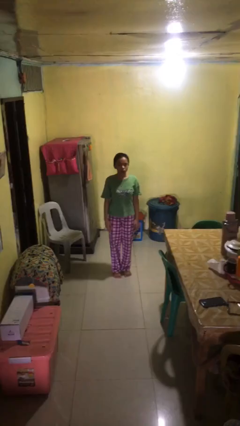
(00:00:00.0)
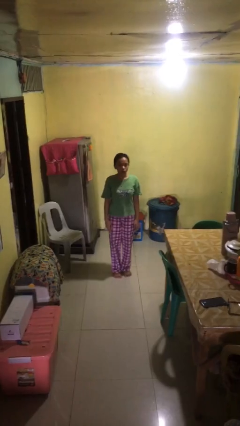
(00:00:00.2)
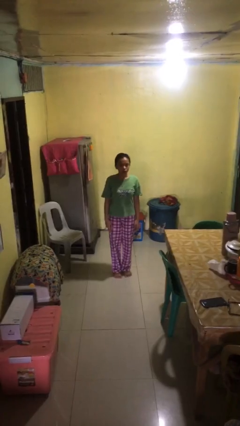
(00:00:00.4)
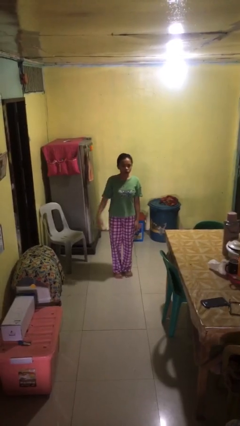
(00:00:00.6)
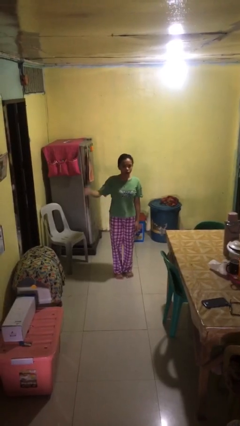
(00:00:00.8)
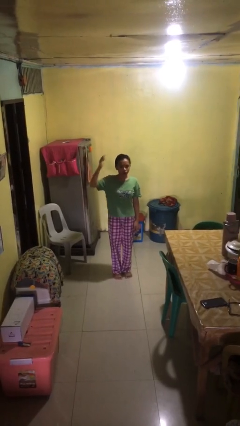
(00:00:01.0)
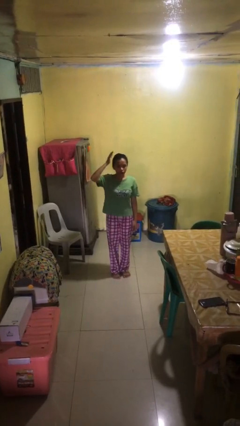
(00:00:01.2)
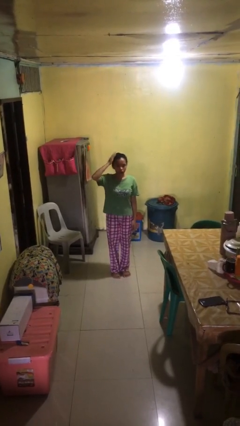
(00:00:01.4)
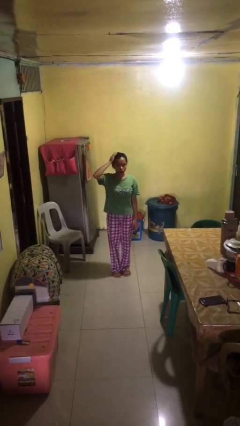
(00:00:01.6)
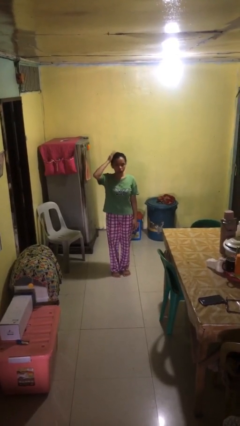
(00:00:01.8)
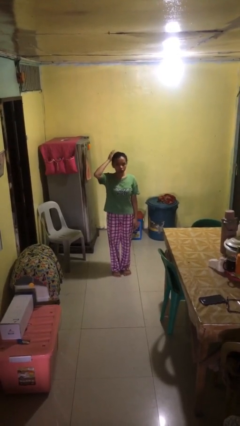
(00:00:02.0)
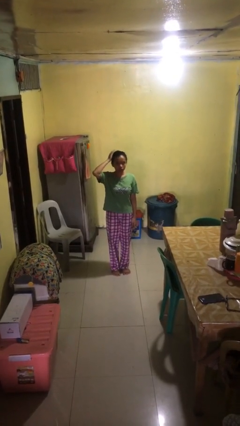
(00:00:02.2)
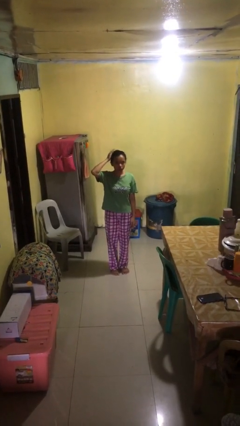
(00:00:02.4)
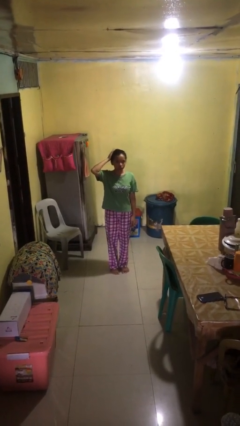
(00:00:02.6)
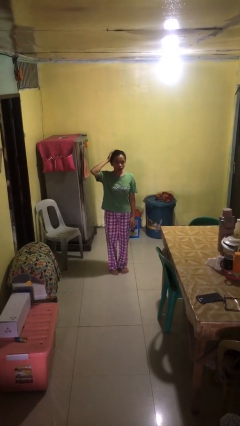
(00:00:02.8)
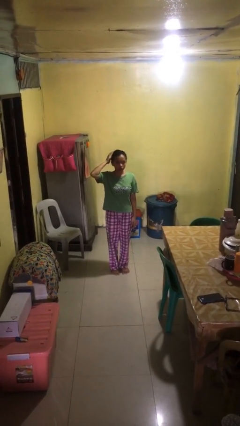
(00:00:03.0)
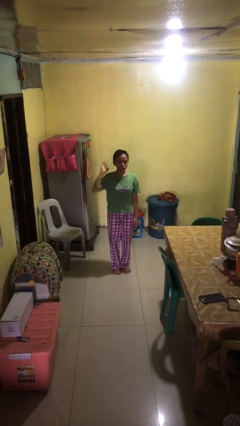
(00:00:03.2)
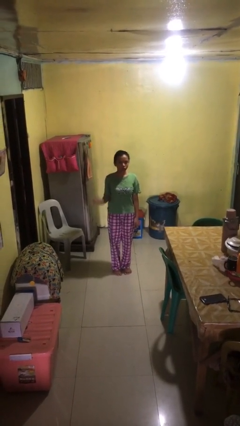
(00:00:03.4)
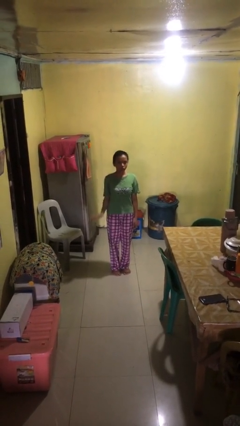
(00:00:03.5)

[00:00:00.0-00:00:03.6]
person pats head

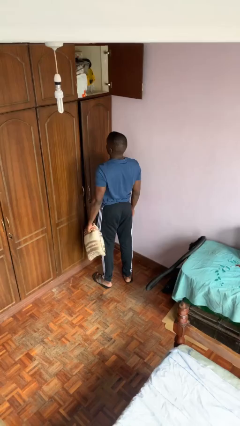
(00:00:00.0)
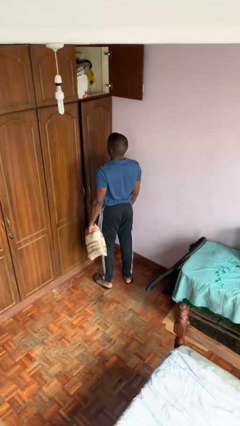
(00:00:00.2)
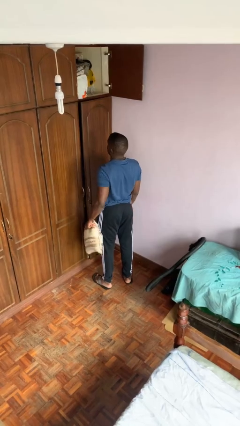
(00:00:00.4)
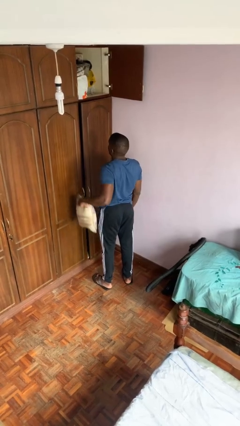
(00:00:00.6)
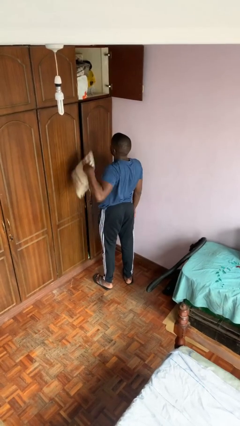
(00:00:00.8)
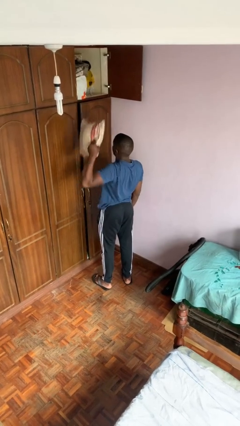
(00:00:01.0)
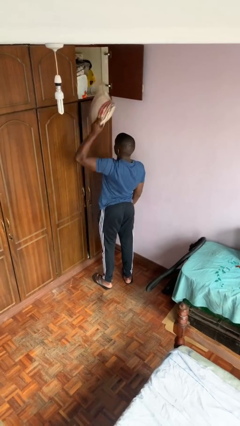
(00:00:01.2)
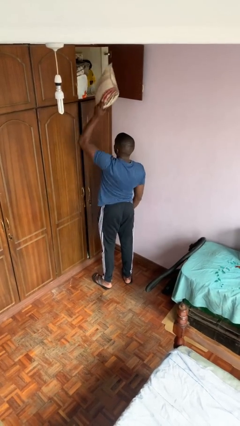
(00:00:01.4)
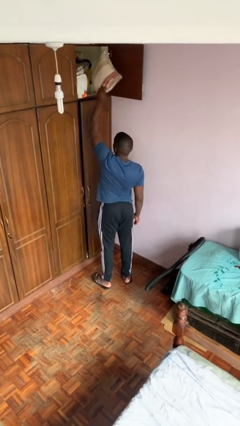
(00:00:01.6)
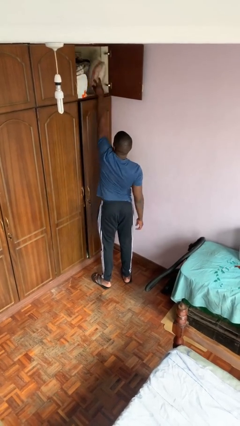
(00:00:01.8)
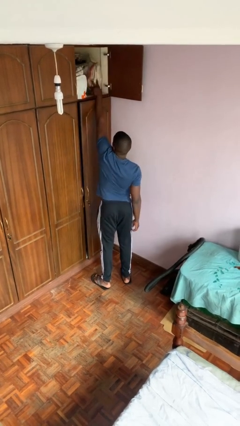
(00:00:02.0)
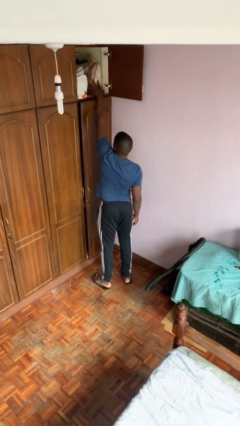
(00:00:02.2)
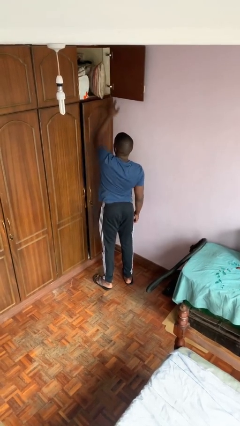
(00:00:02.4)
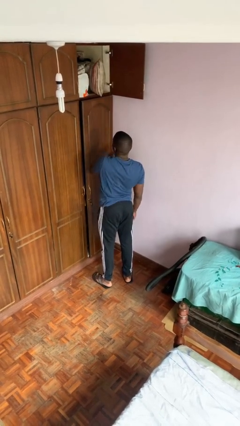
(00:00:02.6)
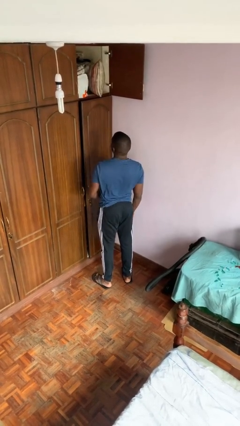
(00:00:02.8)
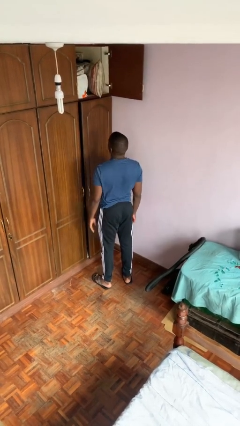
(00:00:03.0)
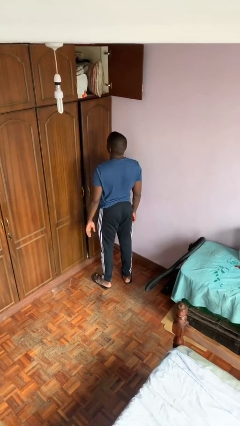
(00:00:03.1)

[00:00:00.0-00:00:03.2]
person puts down object on shelf

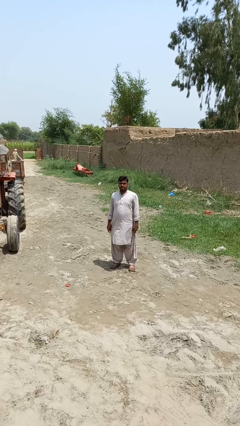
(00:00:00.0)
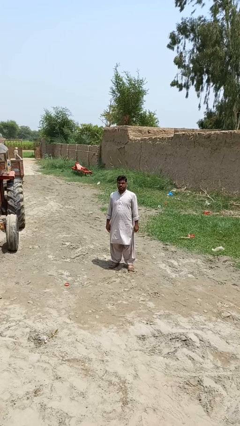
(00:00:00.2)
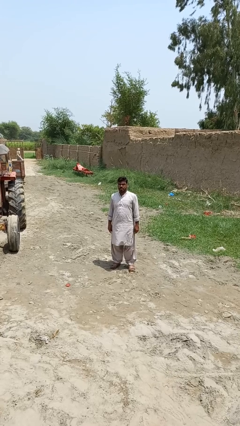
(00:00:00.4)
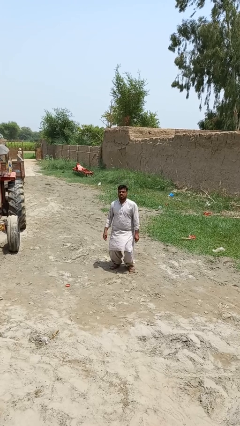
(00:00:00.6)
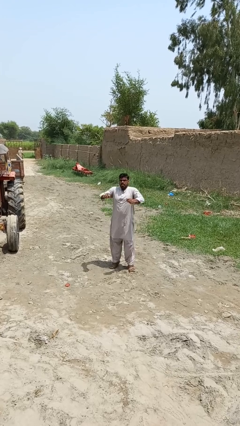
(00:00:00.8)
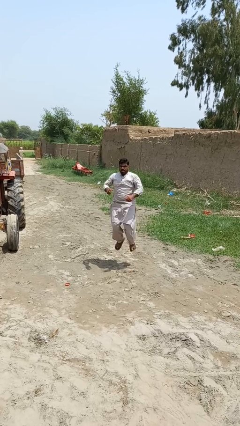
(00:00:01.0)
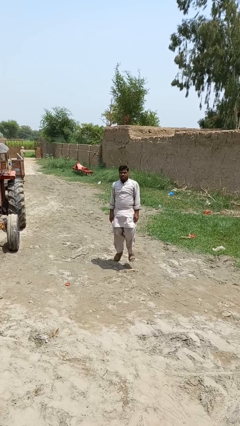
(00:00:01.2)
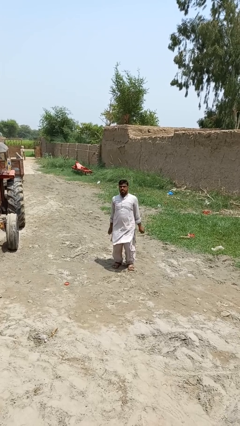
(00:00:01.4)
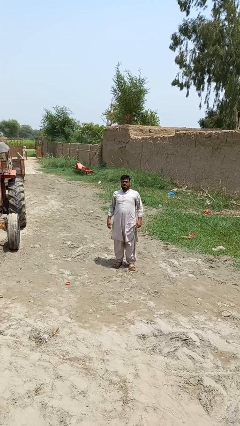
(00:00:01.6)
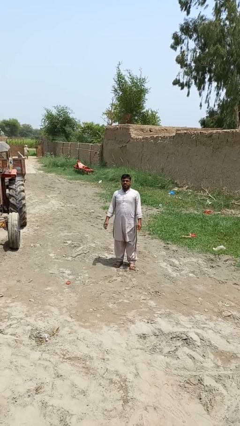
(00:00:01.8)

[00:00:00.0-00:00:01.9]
person jumps

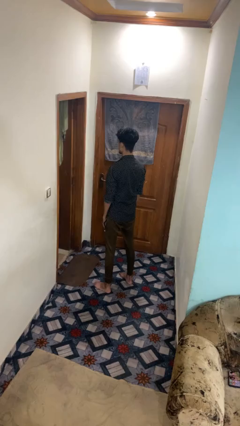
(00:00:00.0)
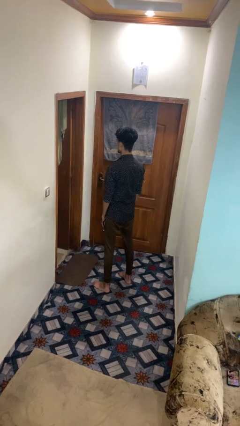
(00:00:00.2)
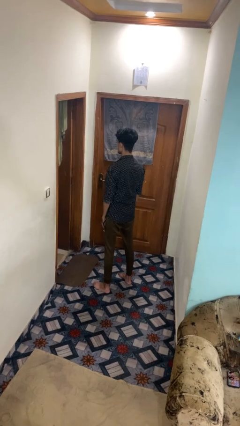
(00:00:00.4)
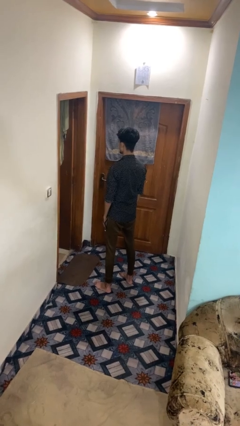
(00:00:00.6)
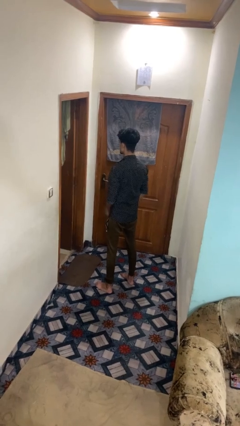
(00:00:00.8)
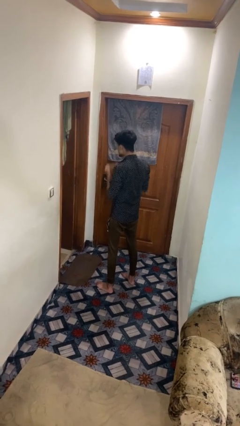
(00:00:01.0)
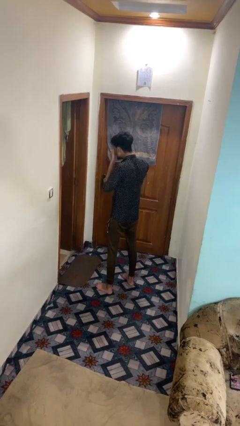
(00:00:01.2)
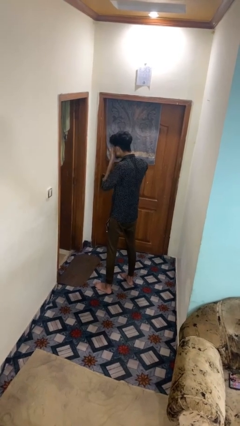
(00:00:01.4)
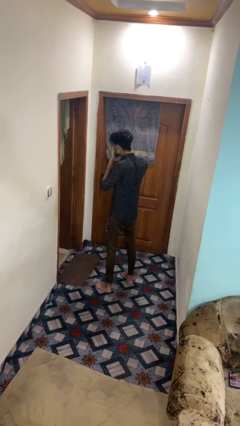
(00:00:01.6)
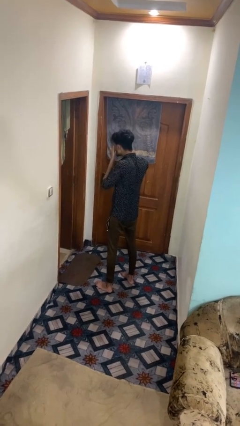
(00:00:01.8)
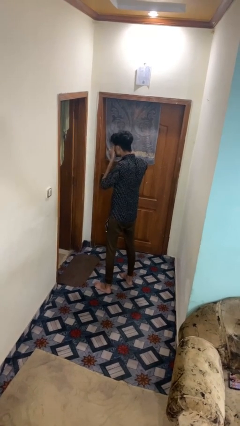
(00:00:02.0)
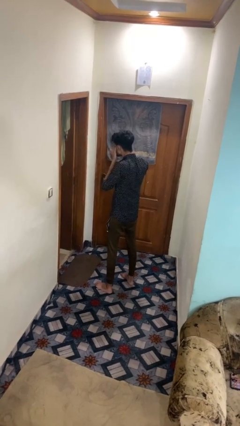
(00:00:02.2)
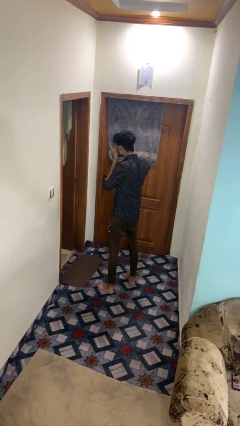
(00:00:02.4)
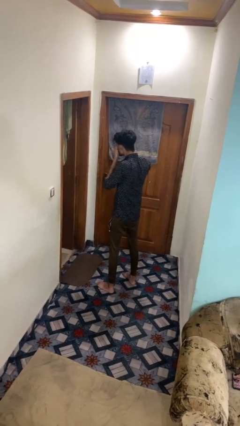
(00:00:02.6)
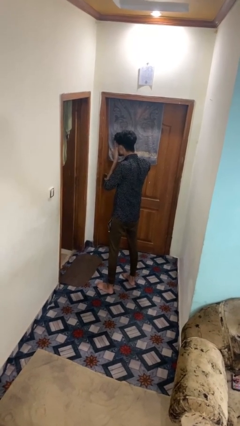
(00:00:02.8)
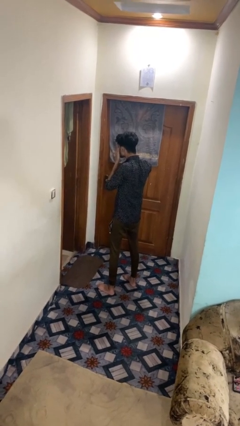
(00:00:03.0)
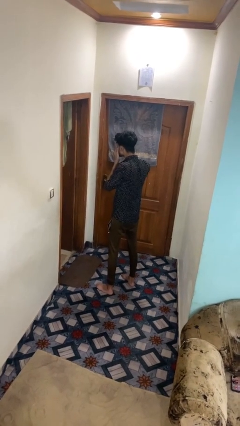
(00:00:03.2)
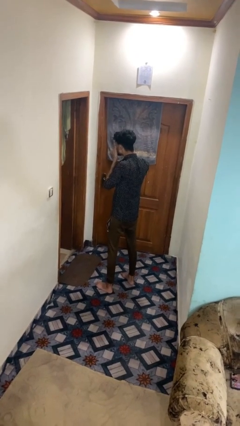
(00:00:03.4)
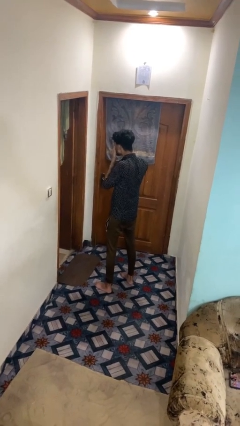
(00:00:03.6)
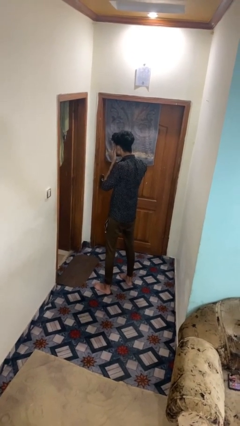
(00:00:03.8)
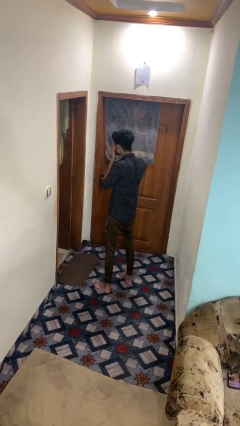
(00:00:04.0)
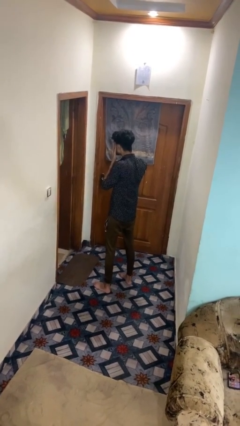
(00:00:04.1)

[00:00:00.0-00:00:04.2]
person rubs eyes

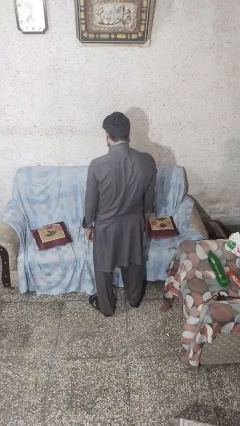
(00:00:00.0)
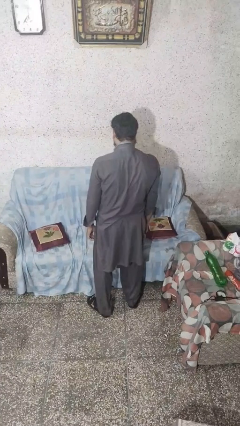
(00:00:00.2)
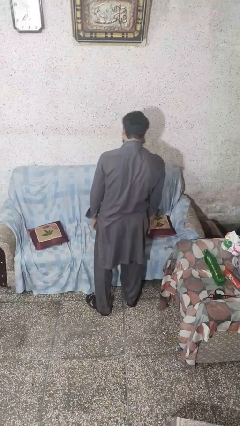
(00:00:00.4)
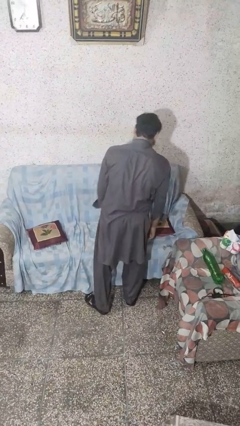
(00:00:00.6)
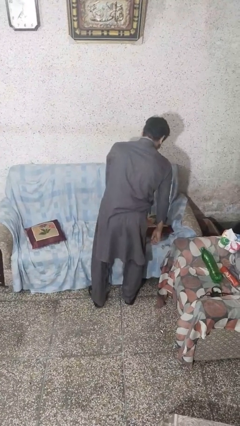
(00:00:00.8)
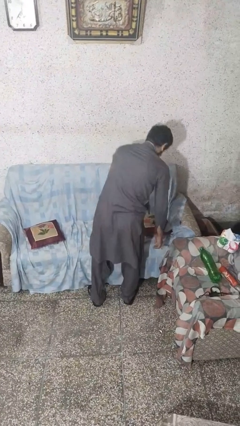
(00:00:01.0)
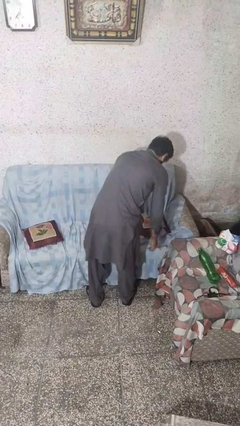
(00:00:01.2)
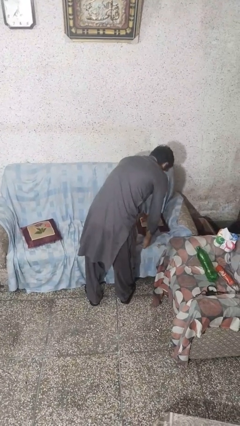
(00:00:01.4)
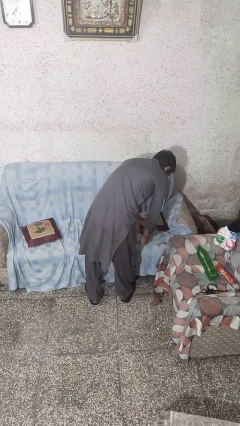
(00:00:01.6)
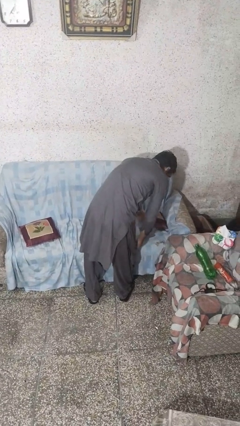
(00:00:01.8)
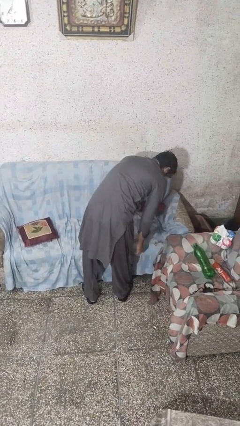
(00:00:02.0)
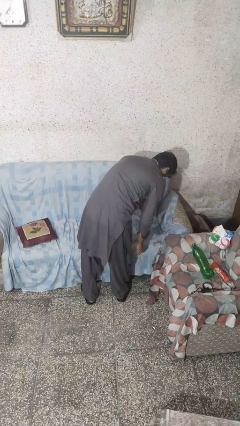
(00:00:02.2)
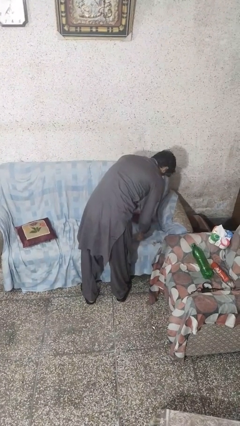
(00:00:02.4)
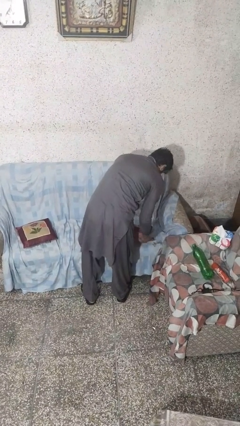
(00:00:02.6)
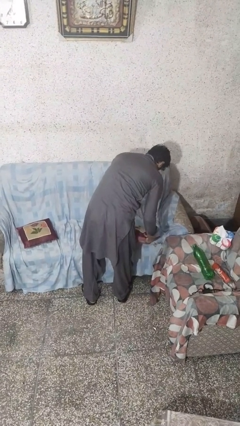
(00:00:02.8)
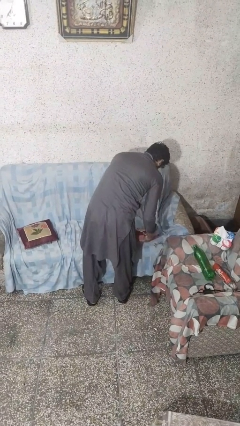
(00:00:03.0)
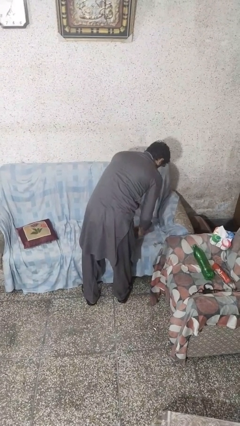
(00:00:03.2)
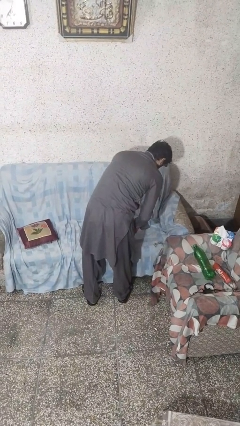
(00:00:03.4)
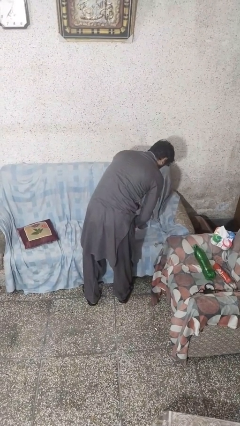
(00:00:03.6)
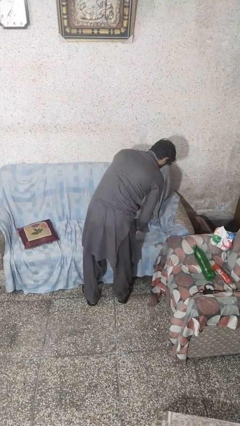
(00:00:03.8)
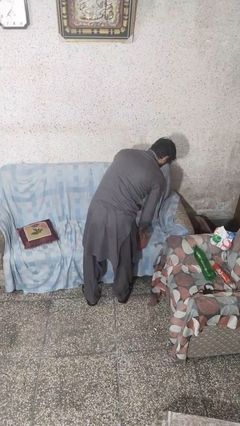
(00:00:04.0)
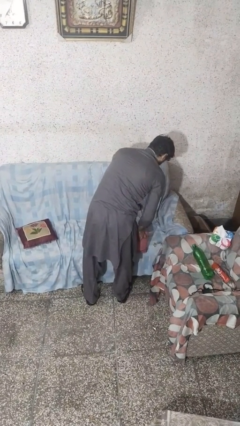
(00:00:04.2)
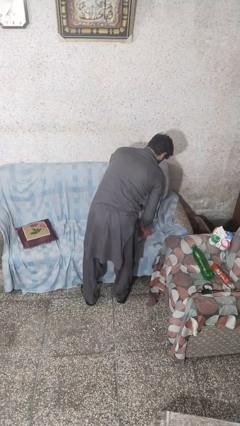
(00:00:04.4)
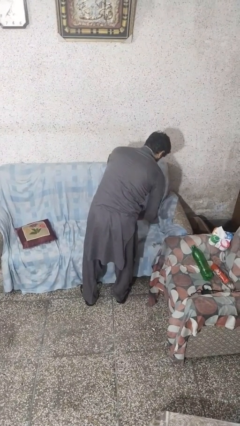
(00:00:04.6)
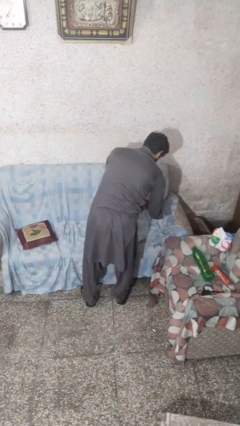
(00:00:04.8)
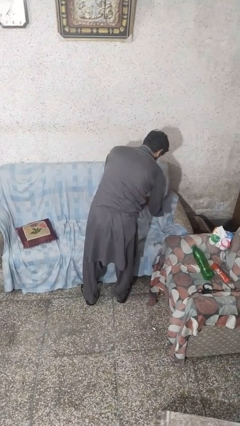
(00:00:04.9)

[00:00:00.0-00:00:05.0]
person searches in couch
